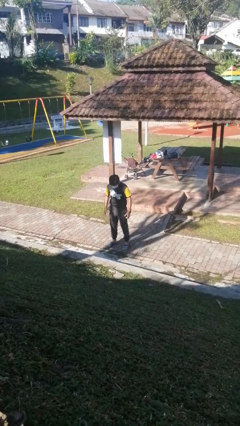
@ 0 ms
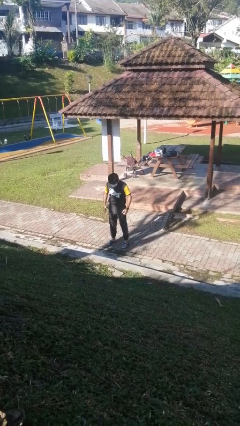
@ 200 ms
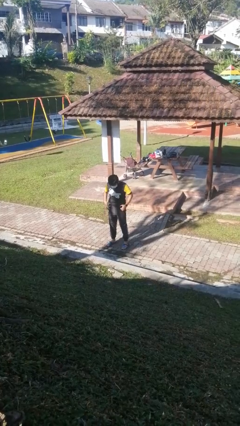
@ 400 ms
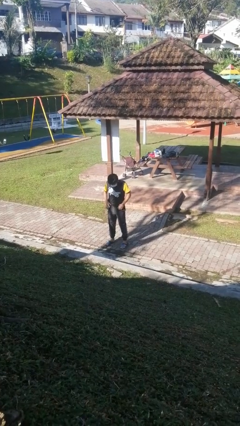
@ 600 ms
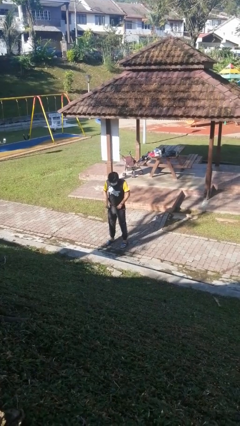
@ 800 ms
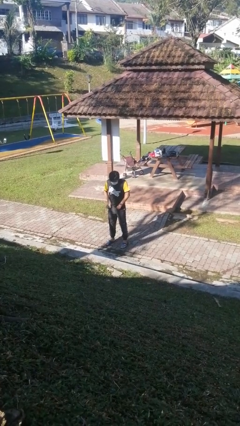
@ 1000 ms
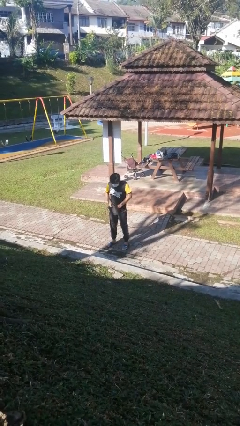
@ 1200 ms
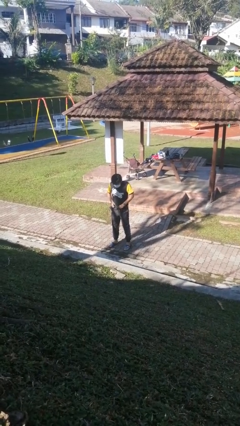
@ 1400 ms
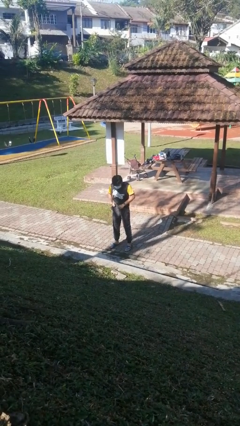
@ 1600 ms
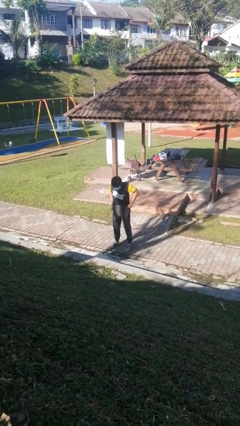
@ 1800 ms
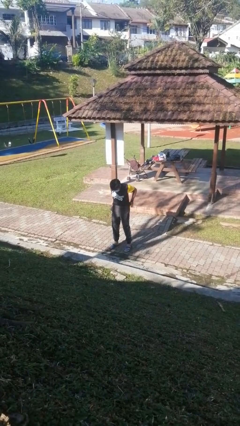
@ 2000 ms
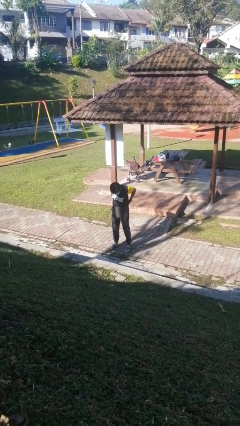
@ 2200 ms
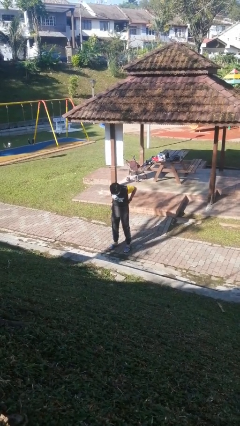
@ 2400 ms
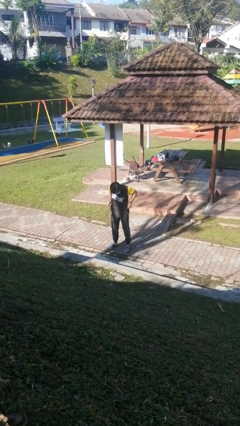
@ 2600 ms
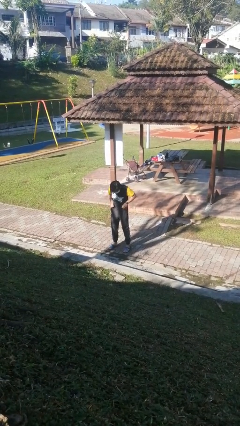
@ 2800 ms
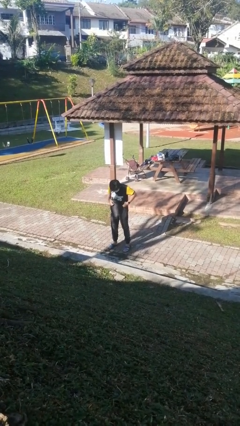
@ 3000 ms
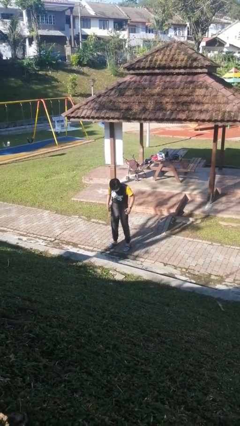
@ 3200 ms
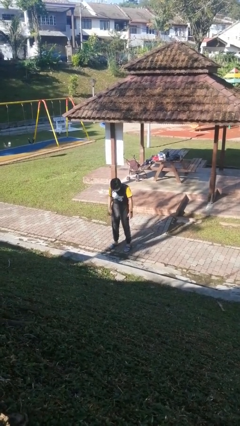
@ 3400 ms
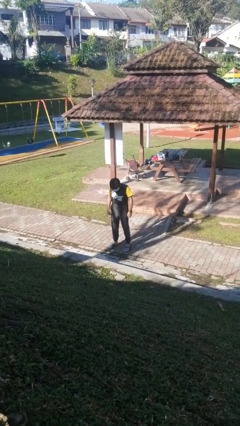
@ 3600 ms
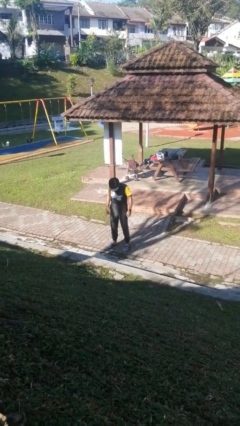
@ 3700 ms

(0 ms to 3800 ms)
person hikes up pants

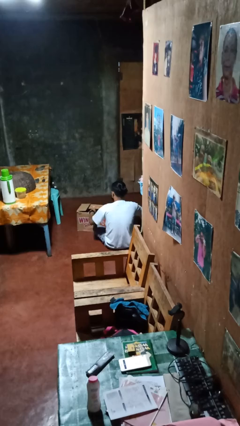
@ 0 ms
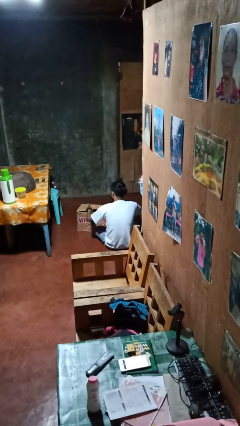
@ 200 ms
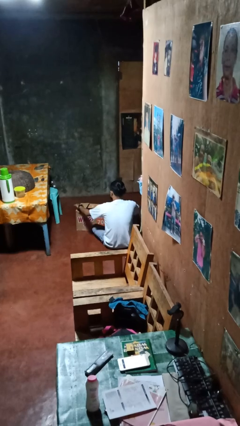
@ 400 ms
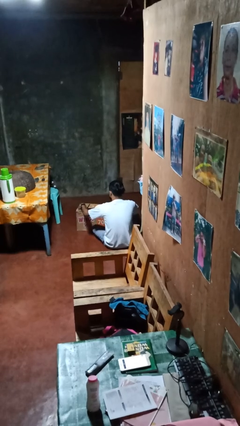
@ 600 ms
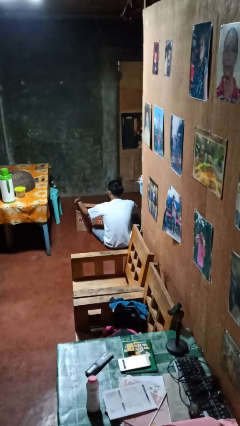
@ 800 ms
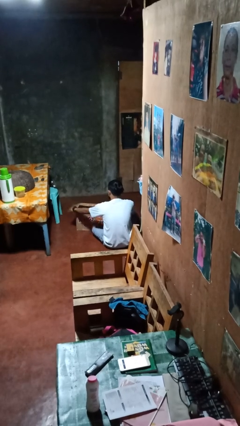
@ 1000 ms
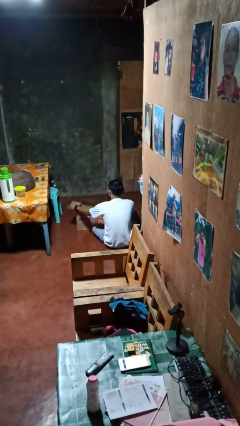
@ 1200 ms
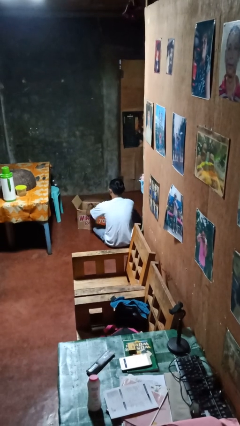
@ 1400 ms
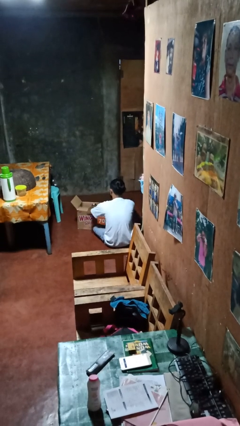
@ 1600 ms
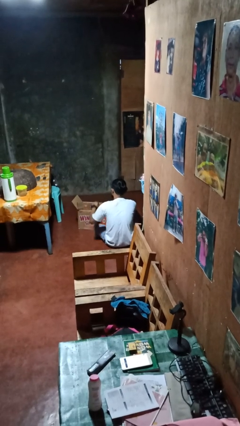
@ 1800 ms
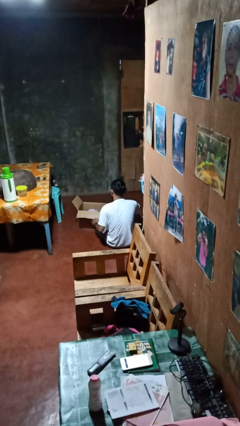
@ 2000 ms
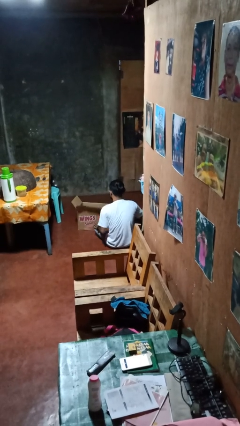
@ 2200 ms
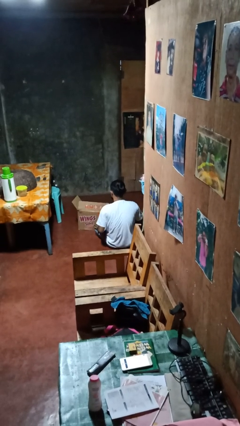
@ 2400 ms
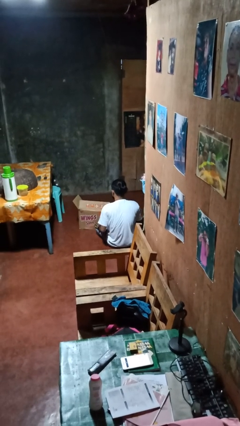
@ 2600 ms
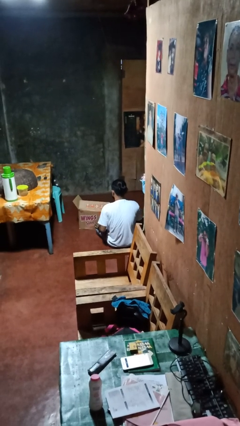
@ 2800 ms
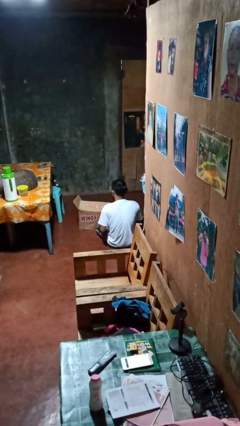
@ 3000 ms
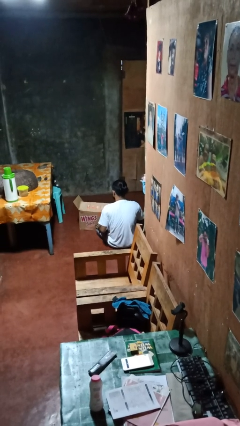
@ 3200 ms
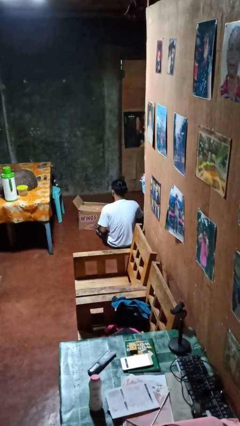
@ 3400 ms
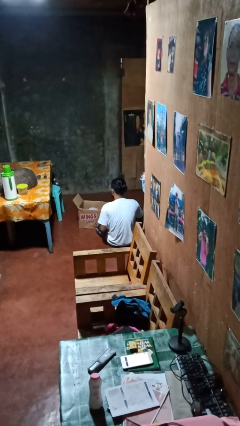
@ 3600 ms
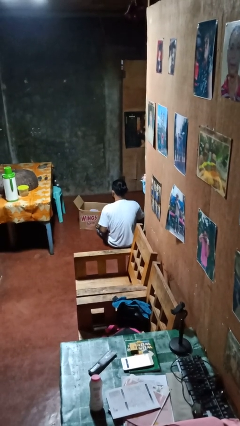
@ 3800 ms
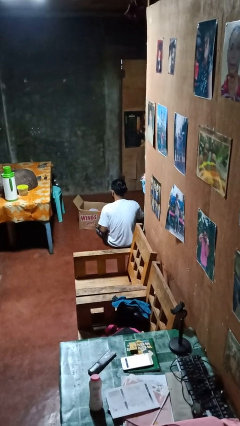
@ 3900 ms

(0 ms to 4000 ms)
person opens box

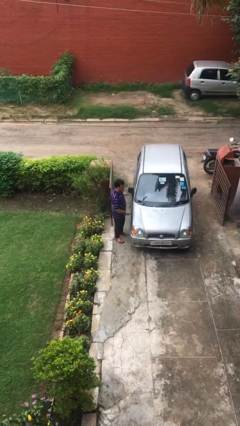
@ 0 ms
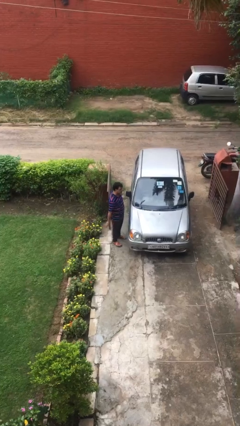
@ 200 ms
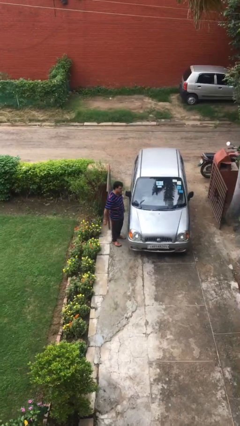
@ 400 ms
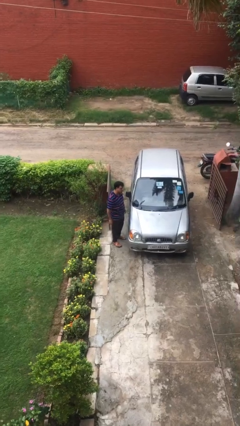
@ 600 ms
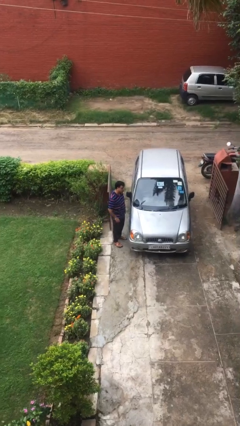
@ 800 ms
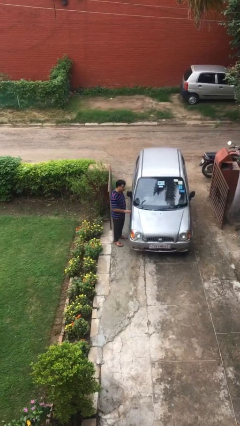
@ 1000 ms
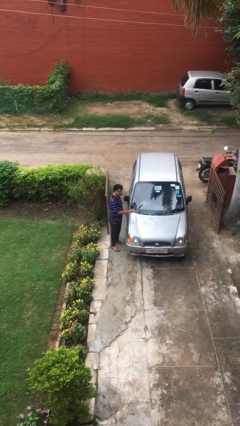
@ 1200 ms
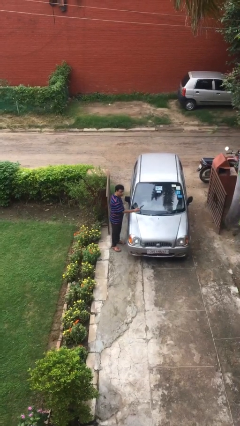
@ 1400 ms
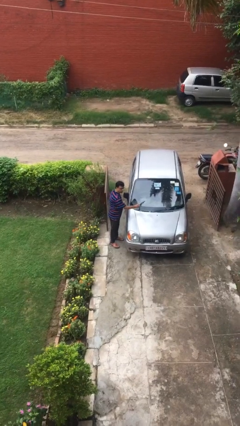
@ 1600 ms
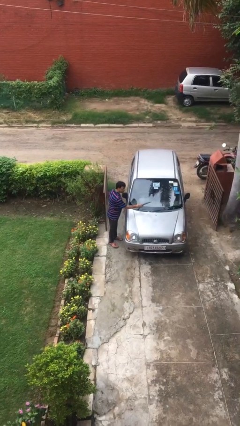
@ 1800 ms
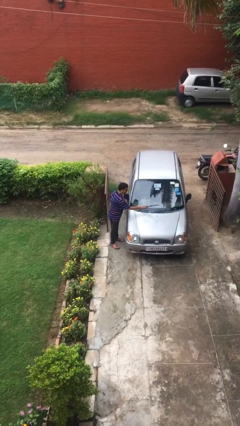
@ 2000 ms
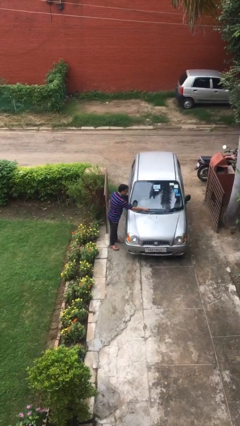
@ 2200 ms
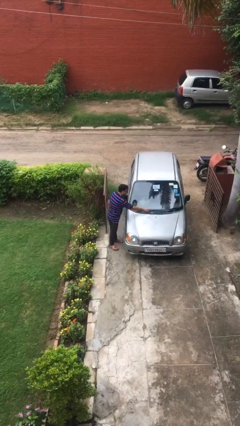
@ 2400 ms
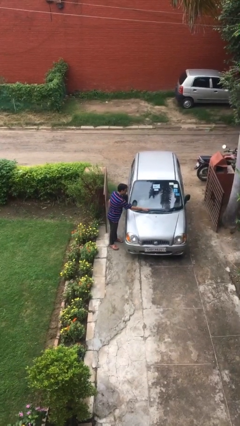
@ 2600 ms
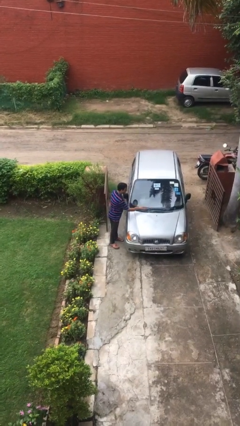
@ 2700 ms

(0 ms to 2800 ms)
person flips down car wipers

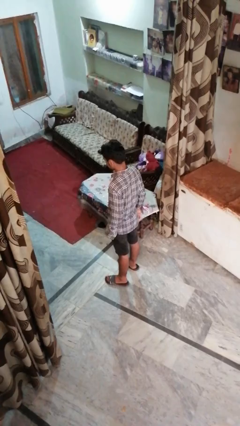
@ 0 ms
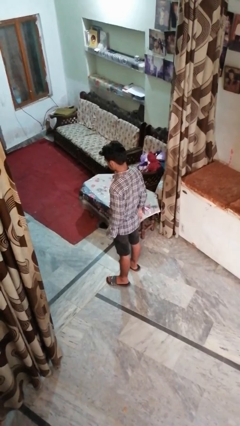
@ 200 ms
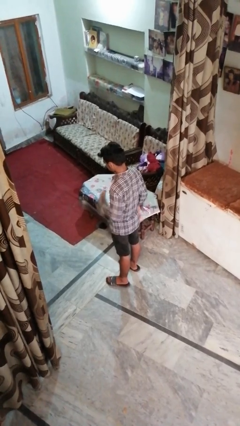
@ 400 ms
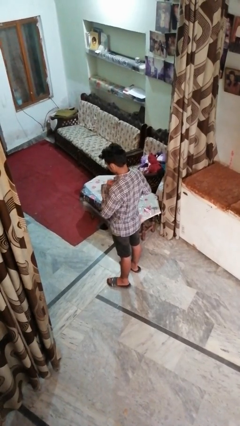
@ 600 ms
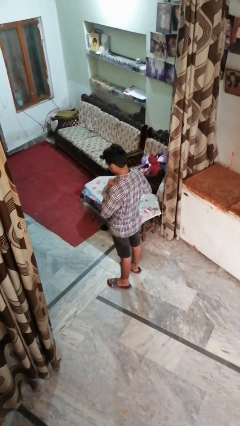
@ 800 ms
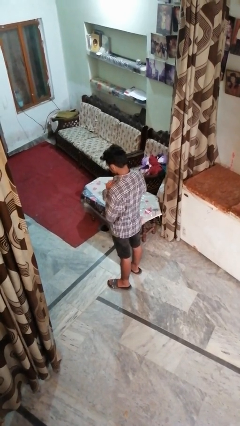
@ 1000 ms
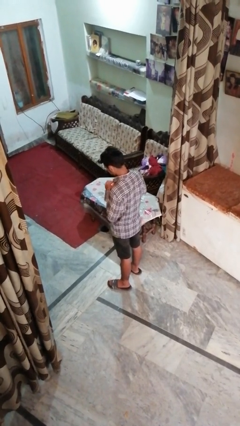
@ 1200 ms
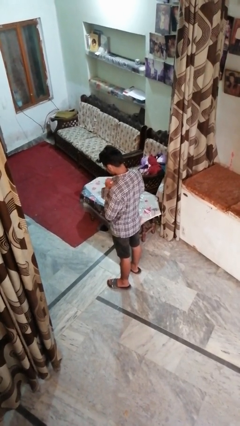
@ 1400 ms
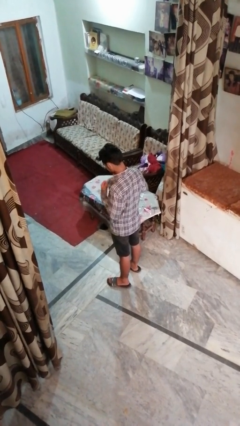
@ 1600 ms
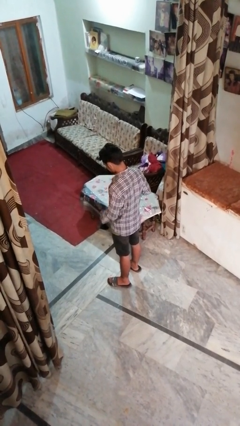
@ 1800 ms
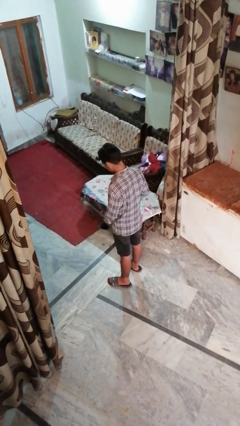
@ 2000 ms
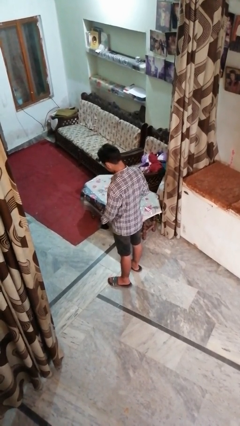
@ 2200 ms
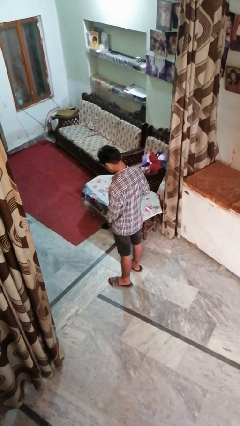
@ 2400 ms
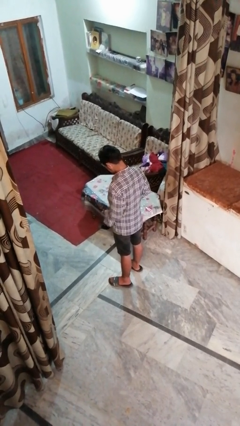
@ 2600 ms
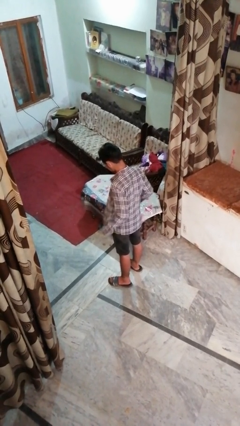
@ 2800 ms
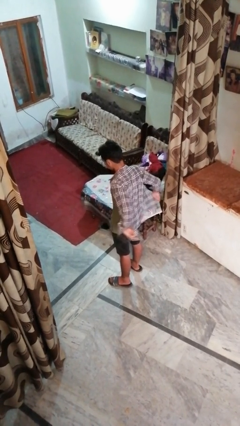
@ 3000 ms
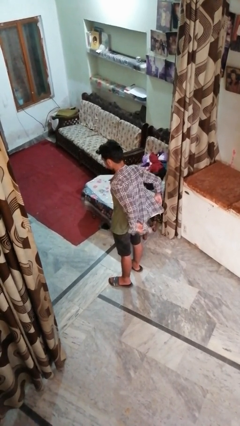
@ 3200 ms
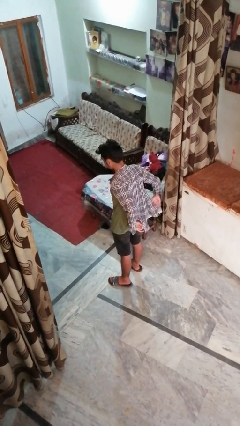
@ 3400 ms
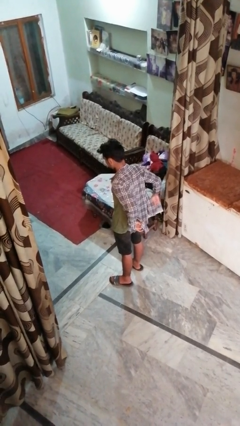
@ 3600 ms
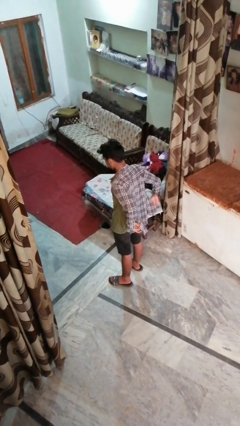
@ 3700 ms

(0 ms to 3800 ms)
person unbuttons shirt

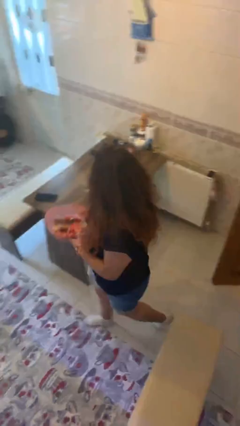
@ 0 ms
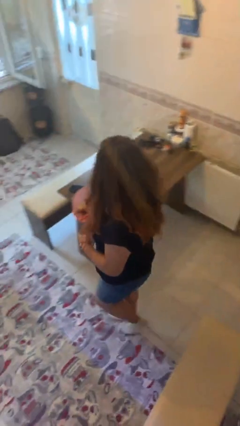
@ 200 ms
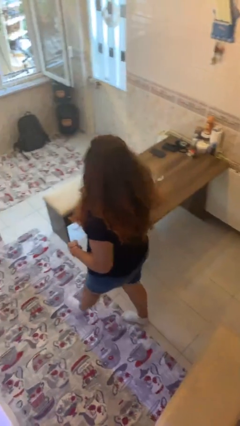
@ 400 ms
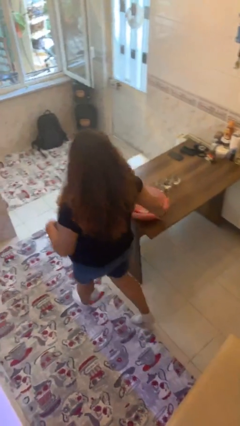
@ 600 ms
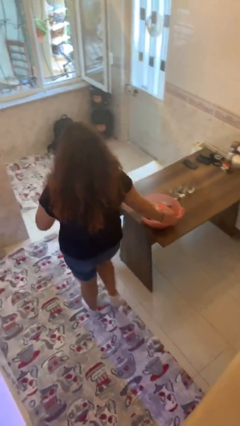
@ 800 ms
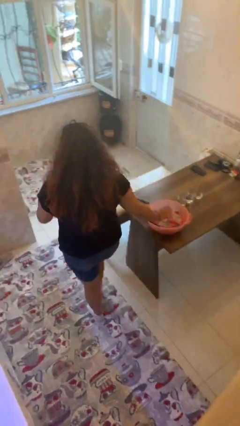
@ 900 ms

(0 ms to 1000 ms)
person puts down object on table

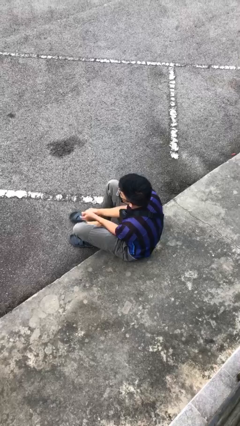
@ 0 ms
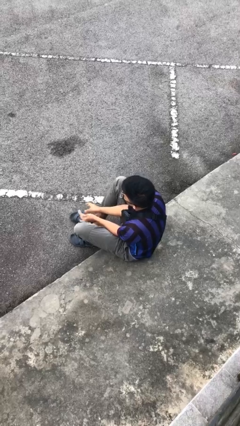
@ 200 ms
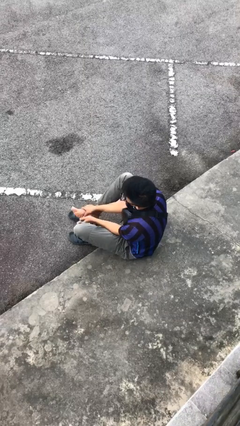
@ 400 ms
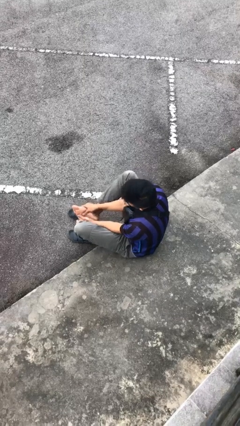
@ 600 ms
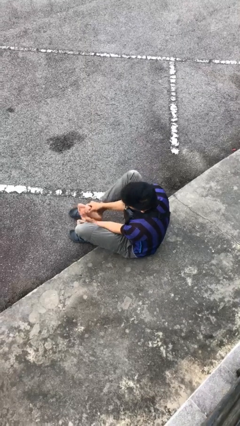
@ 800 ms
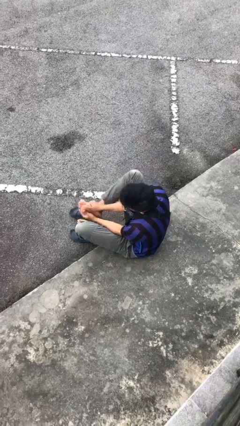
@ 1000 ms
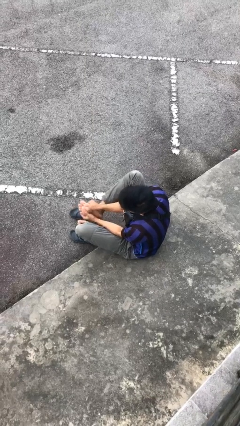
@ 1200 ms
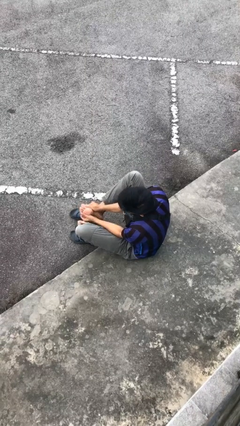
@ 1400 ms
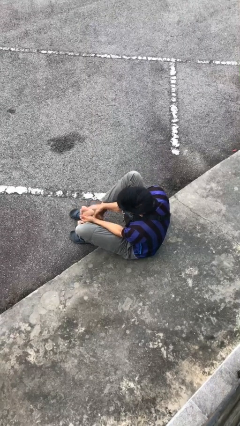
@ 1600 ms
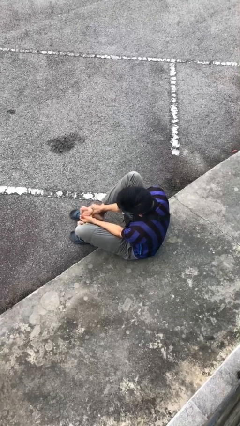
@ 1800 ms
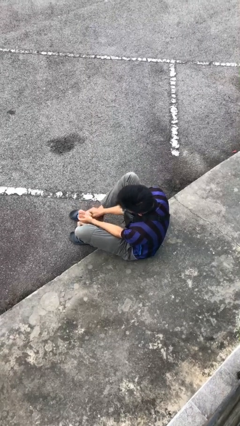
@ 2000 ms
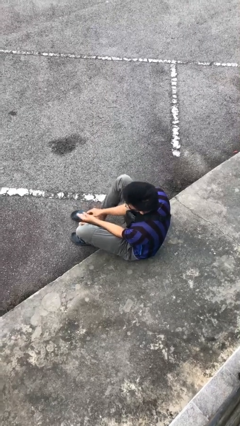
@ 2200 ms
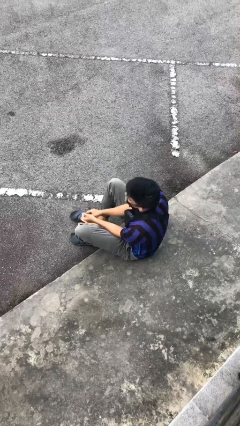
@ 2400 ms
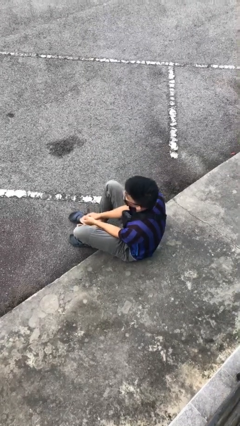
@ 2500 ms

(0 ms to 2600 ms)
person rubs foot
